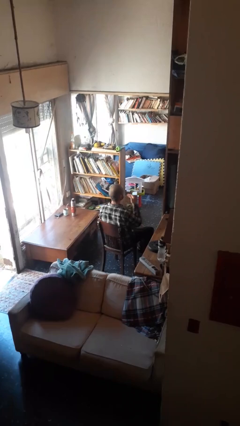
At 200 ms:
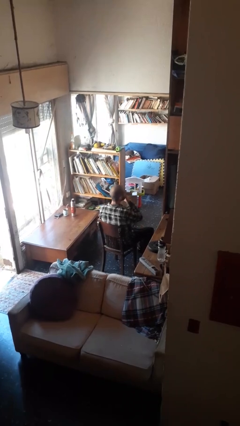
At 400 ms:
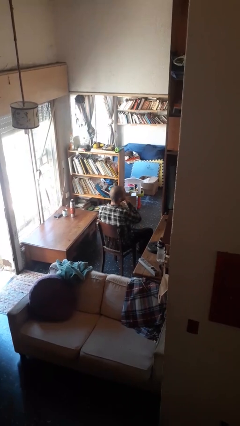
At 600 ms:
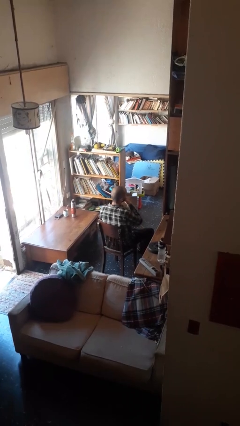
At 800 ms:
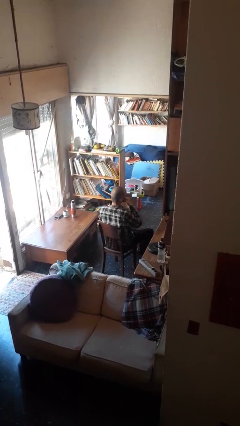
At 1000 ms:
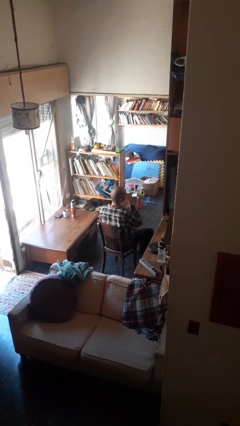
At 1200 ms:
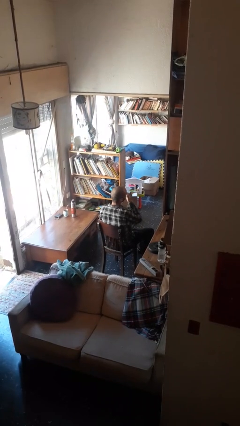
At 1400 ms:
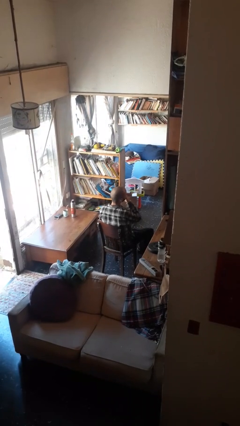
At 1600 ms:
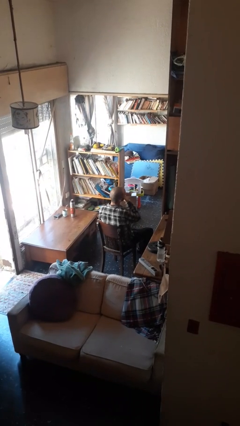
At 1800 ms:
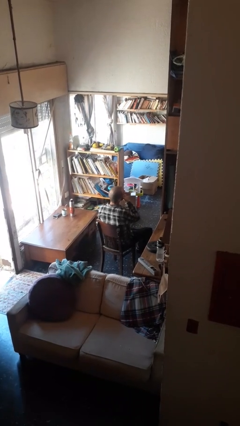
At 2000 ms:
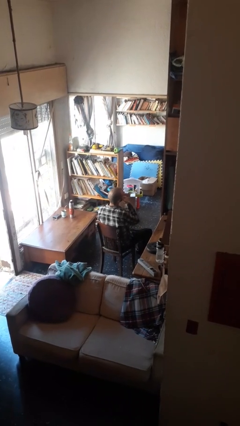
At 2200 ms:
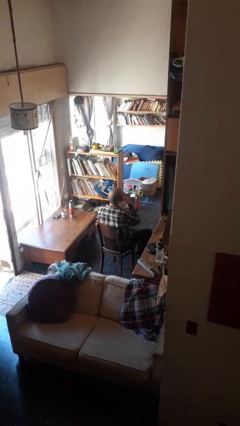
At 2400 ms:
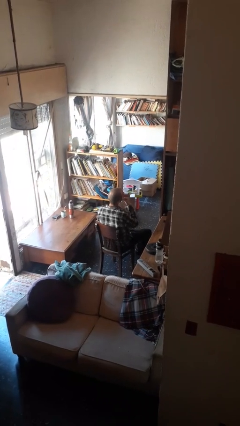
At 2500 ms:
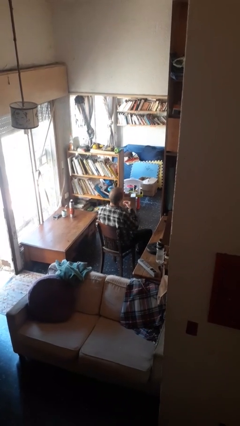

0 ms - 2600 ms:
person strokes chin

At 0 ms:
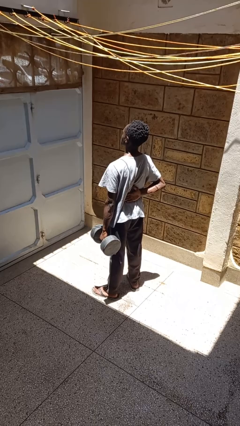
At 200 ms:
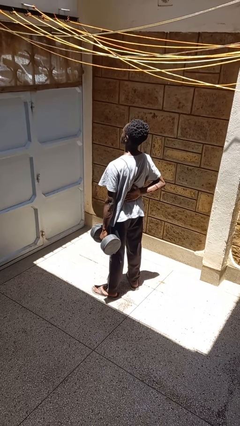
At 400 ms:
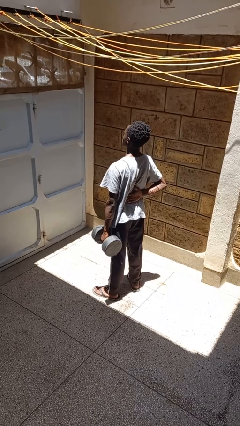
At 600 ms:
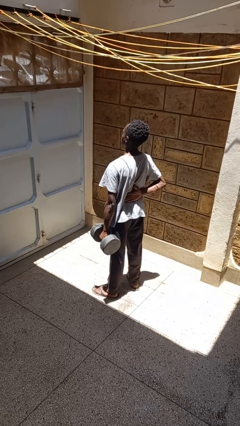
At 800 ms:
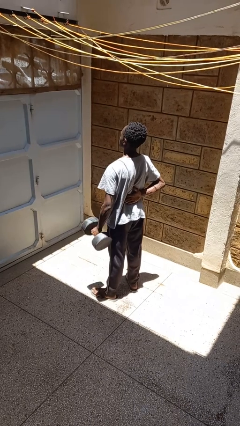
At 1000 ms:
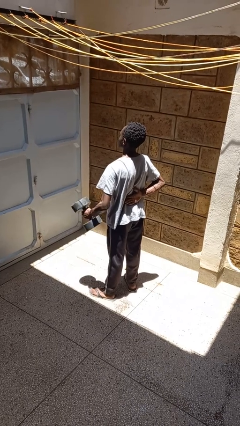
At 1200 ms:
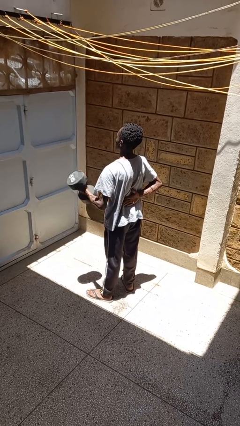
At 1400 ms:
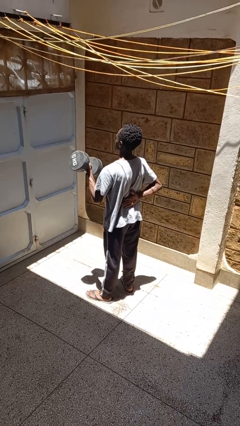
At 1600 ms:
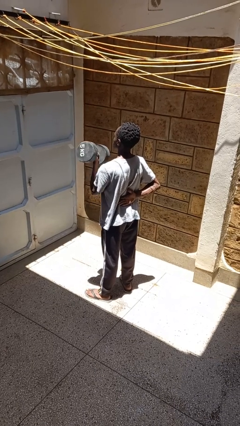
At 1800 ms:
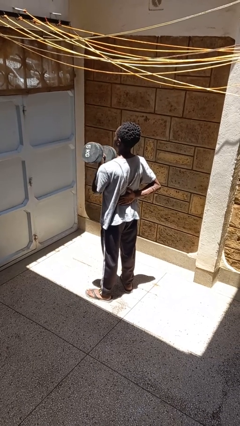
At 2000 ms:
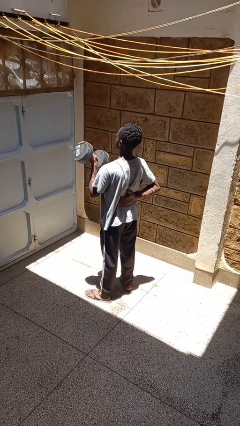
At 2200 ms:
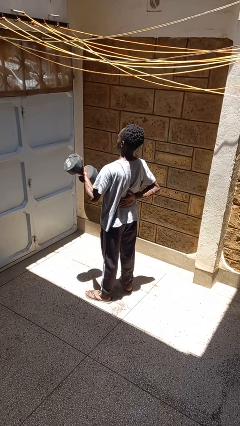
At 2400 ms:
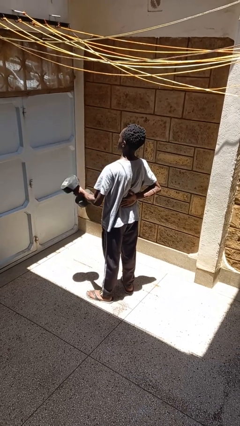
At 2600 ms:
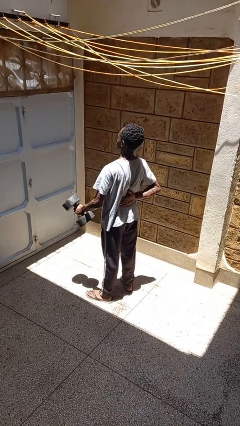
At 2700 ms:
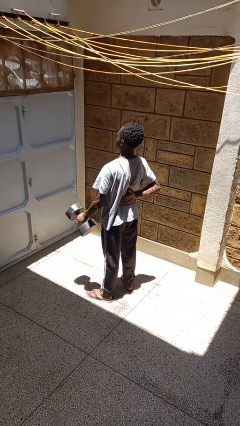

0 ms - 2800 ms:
person lifts dumbbells

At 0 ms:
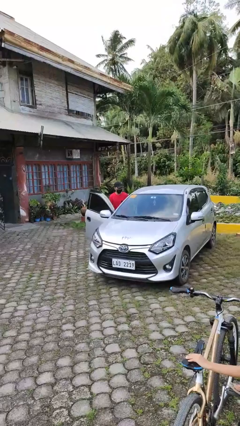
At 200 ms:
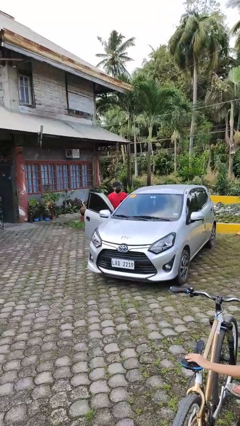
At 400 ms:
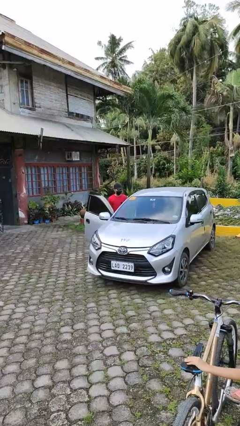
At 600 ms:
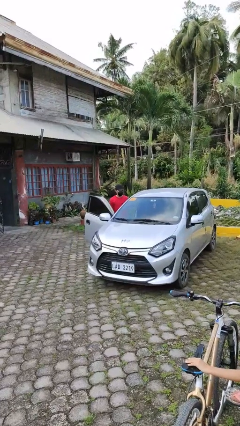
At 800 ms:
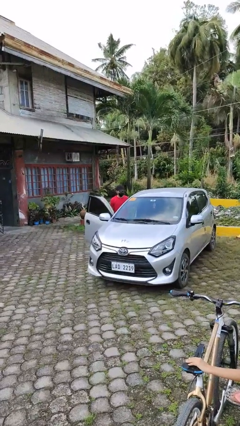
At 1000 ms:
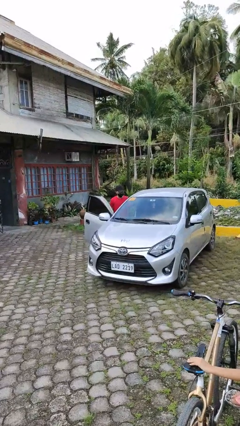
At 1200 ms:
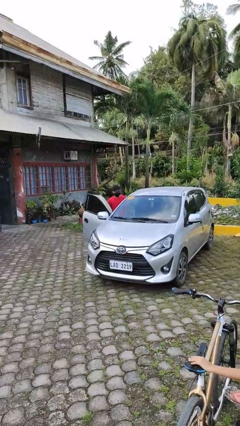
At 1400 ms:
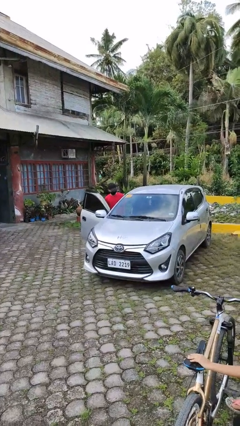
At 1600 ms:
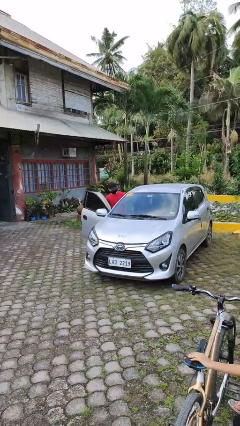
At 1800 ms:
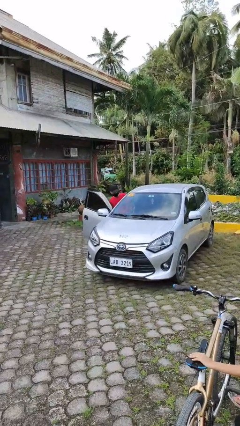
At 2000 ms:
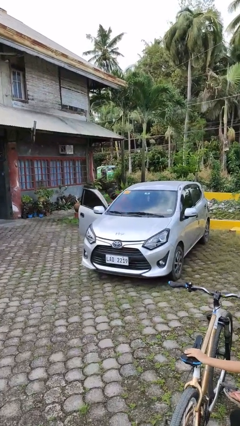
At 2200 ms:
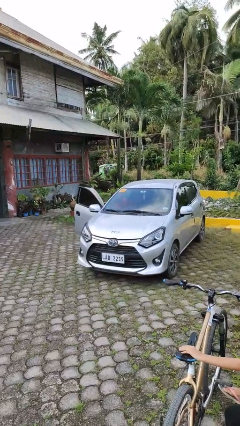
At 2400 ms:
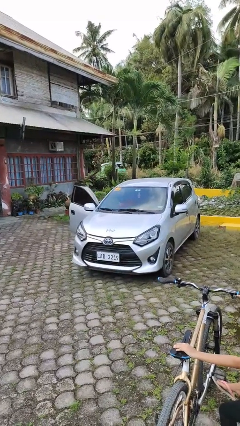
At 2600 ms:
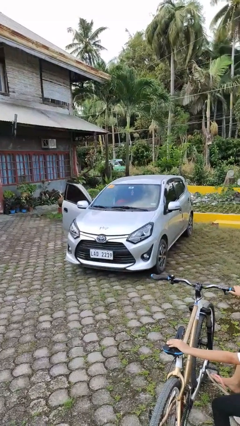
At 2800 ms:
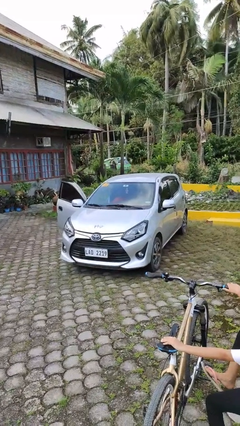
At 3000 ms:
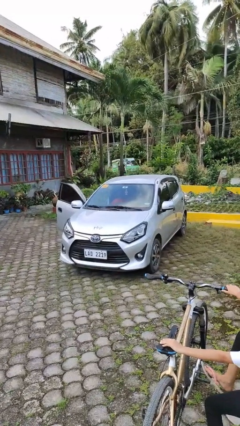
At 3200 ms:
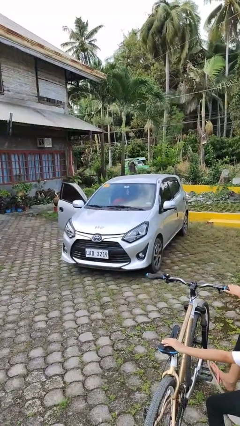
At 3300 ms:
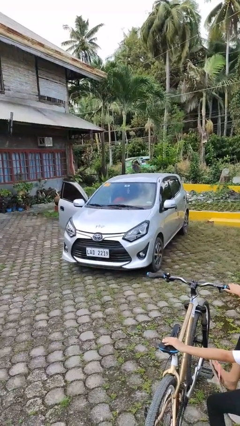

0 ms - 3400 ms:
person enters car

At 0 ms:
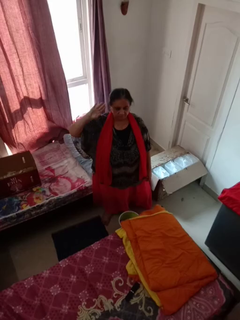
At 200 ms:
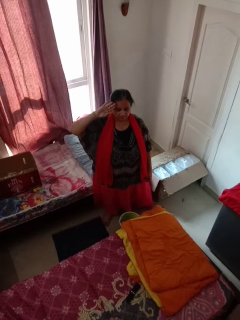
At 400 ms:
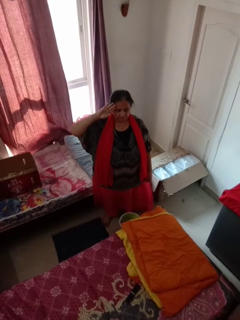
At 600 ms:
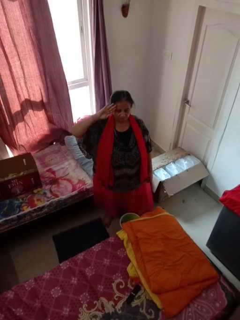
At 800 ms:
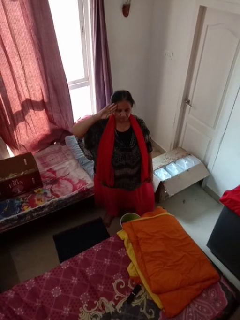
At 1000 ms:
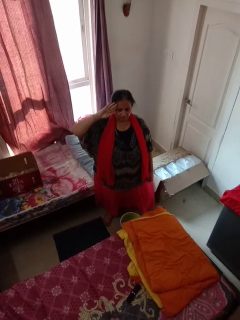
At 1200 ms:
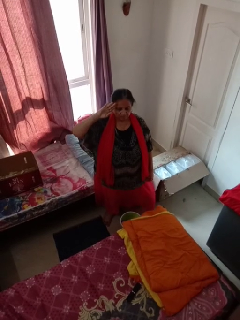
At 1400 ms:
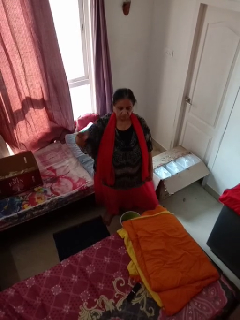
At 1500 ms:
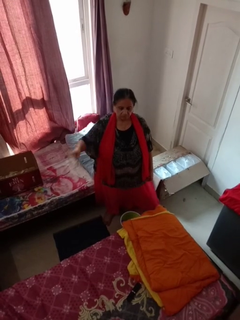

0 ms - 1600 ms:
person salutes

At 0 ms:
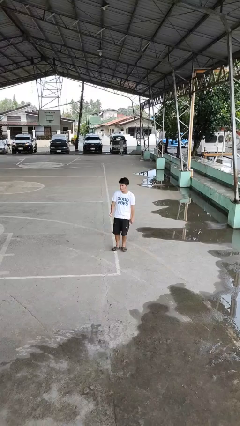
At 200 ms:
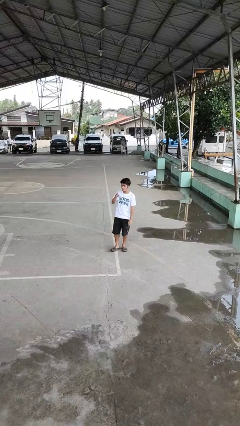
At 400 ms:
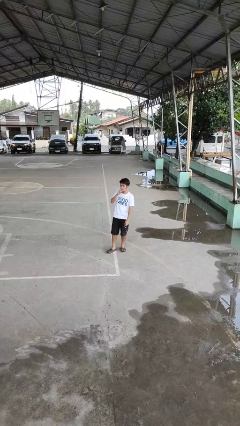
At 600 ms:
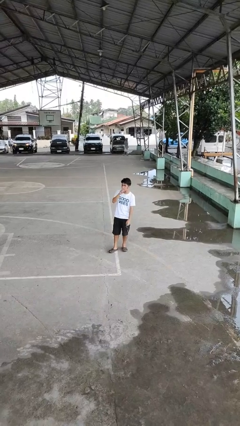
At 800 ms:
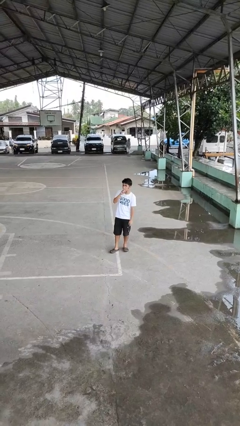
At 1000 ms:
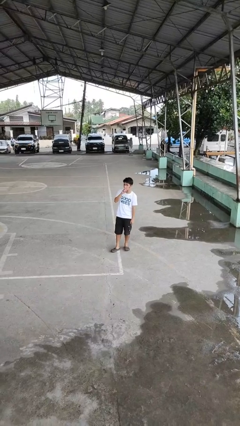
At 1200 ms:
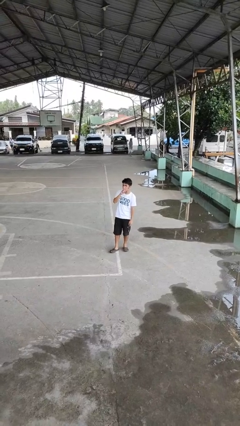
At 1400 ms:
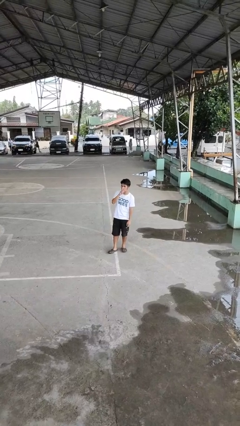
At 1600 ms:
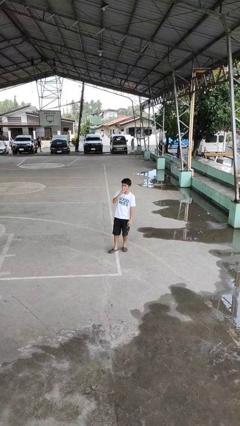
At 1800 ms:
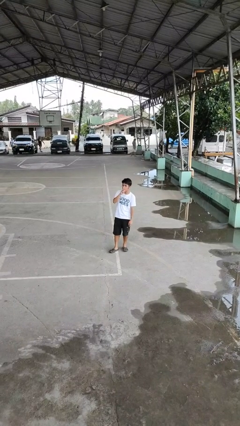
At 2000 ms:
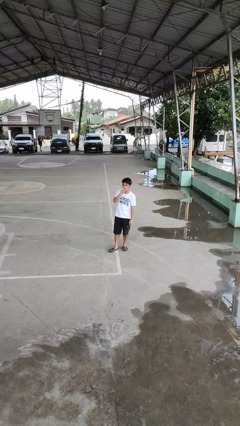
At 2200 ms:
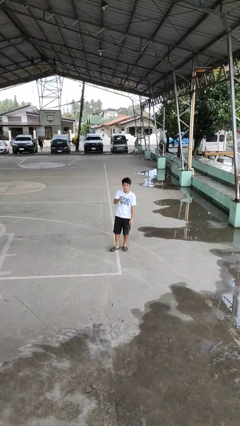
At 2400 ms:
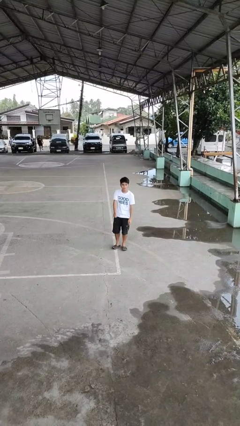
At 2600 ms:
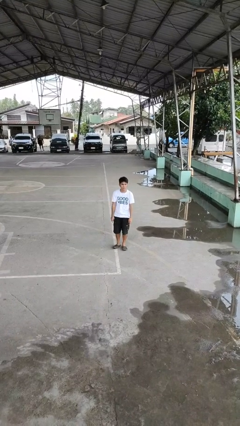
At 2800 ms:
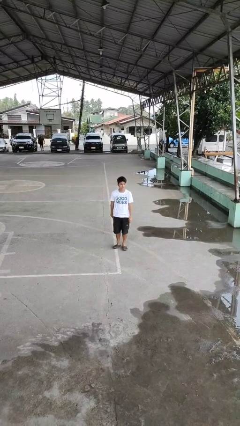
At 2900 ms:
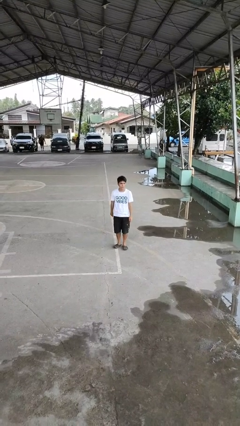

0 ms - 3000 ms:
person gestures be quiet

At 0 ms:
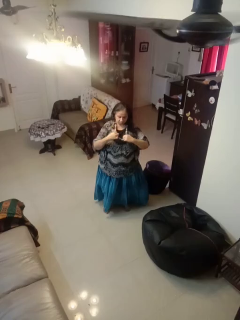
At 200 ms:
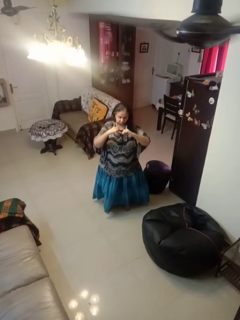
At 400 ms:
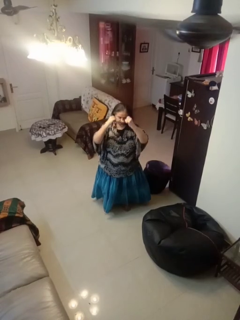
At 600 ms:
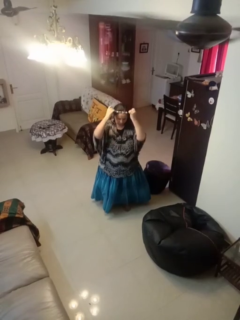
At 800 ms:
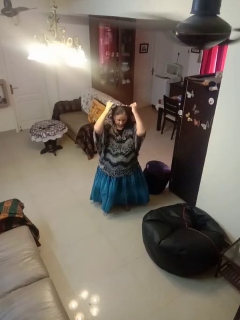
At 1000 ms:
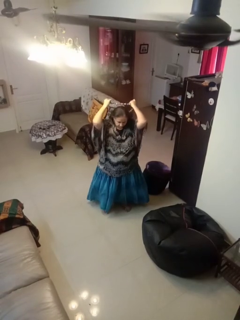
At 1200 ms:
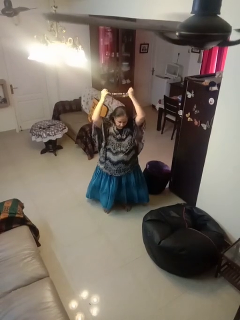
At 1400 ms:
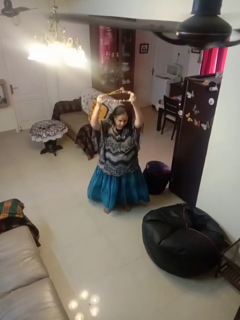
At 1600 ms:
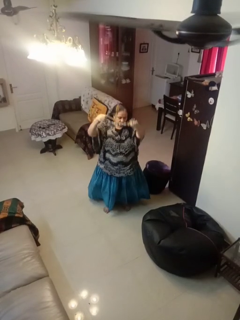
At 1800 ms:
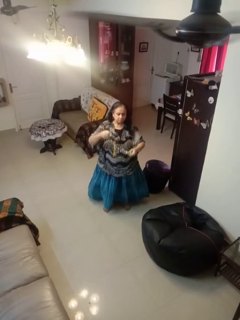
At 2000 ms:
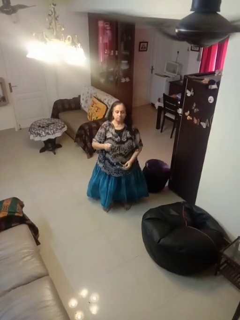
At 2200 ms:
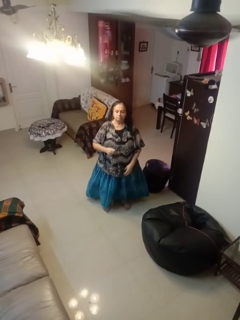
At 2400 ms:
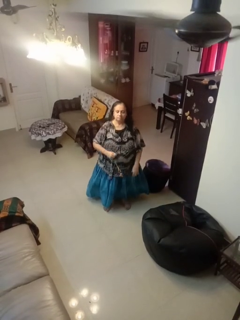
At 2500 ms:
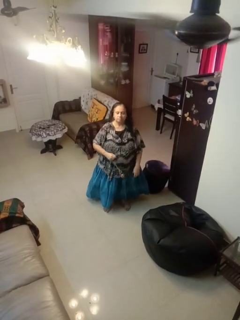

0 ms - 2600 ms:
person takes off necklace

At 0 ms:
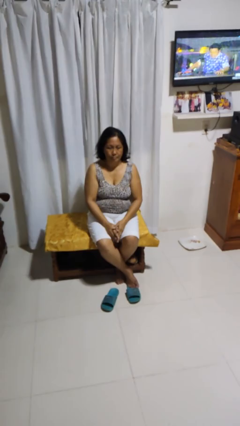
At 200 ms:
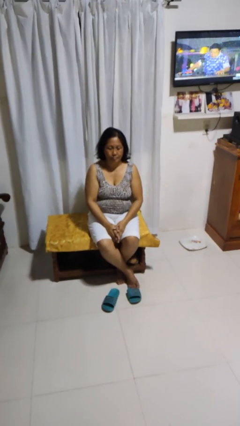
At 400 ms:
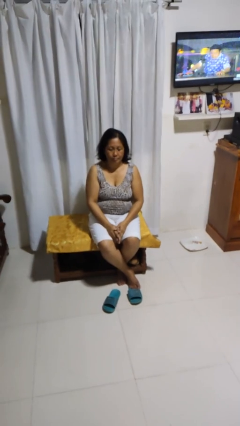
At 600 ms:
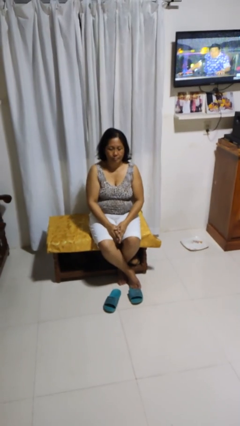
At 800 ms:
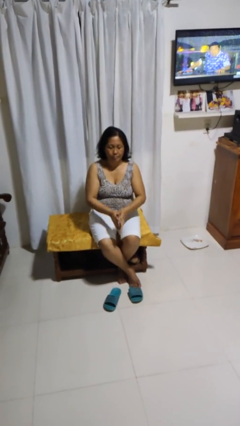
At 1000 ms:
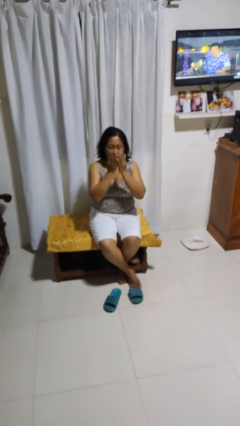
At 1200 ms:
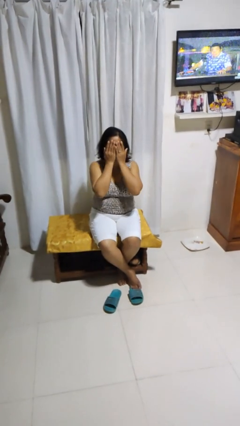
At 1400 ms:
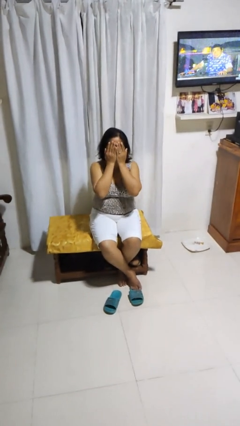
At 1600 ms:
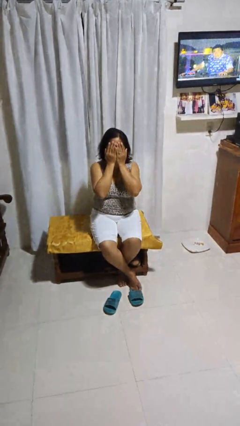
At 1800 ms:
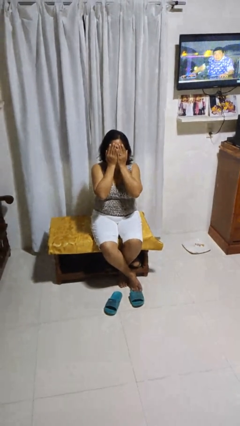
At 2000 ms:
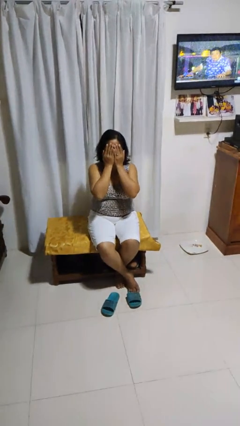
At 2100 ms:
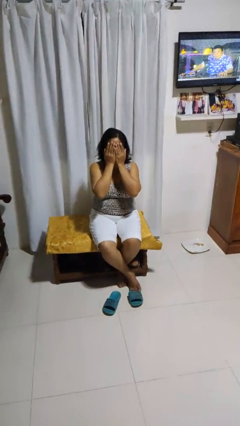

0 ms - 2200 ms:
person covers face with hands

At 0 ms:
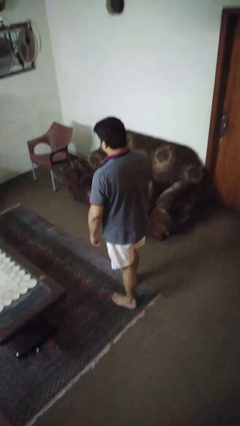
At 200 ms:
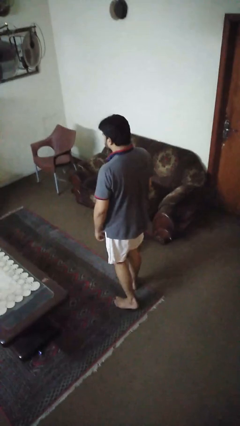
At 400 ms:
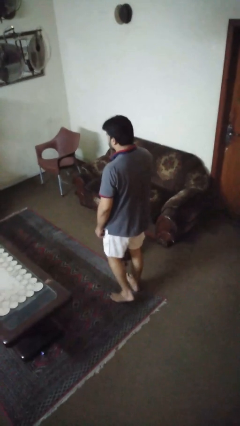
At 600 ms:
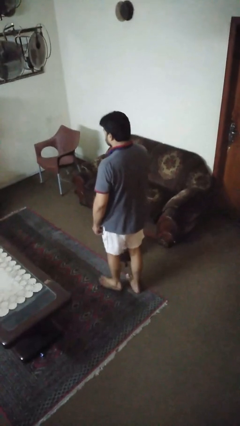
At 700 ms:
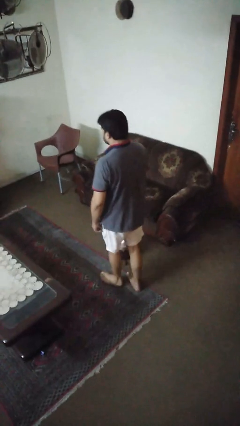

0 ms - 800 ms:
person trips on object on floor
